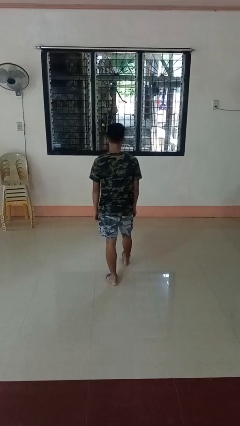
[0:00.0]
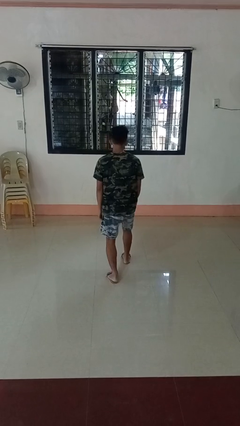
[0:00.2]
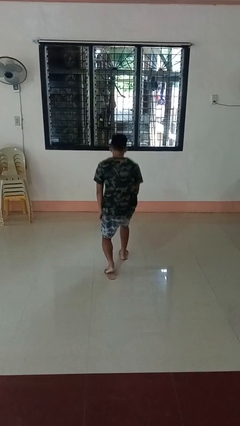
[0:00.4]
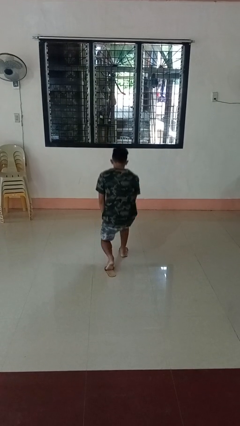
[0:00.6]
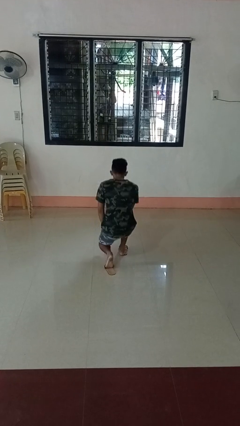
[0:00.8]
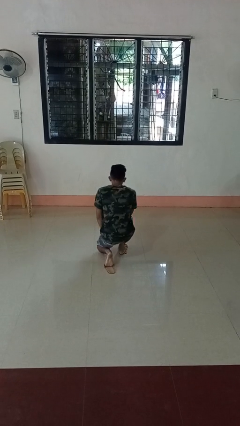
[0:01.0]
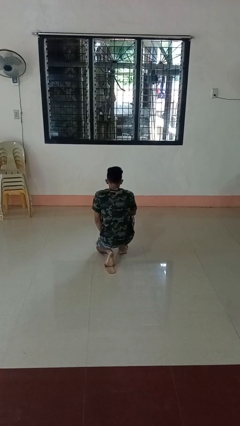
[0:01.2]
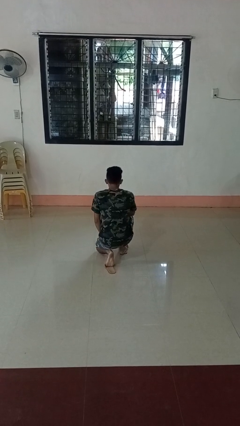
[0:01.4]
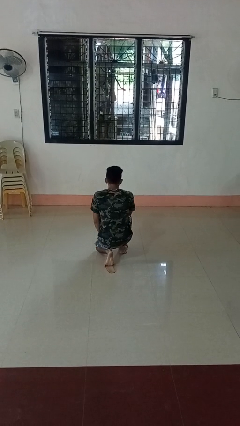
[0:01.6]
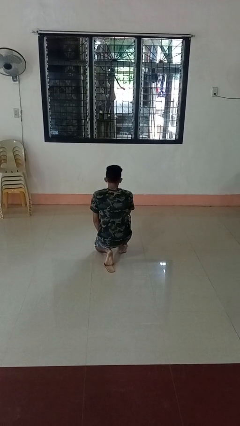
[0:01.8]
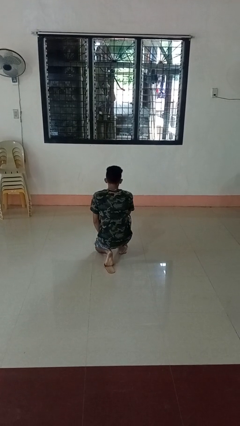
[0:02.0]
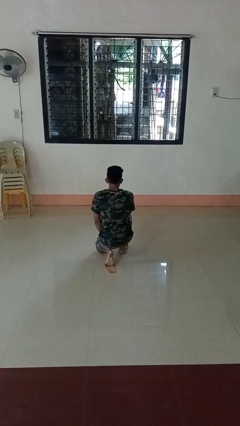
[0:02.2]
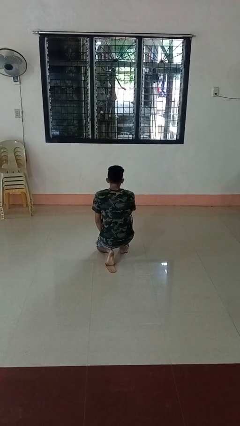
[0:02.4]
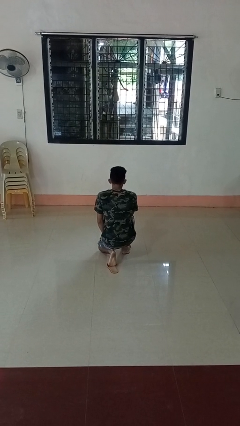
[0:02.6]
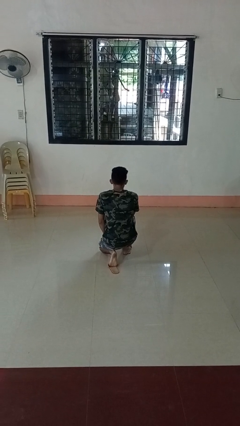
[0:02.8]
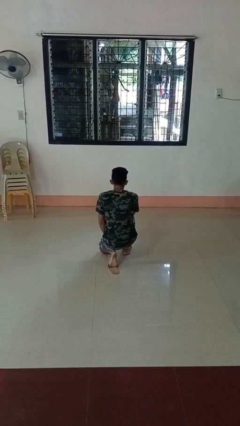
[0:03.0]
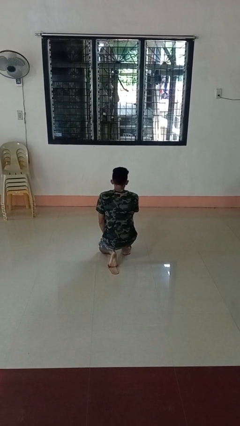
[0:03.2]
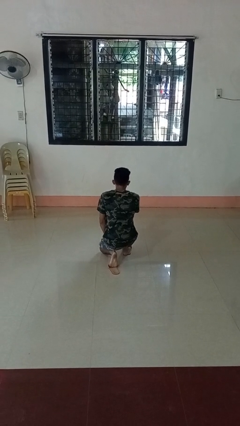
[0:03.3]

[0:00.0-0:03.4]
person kneels

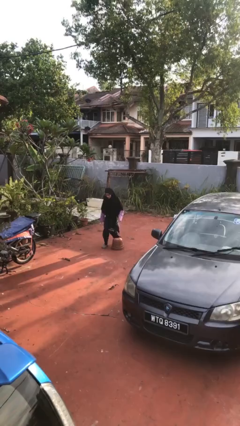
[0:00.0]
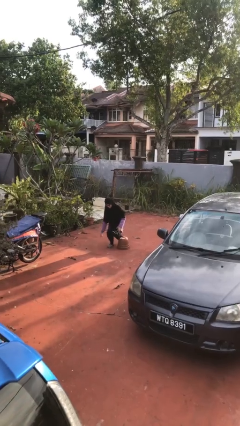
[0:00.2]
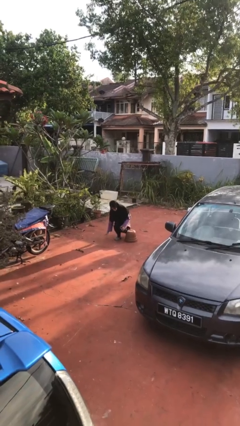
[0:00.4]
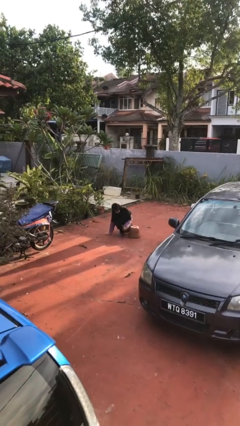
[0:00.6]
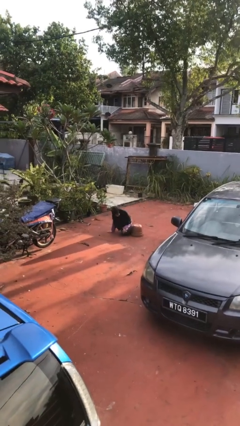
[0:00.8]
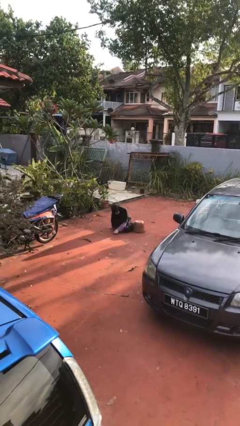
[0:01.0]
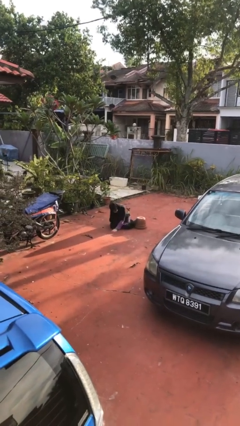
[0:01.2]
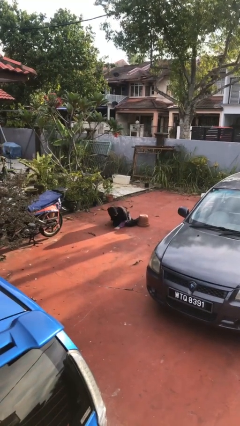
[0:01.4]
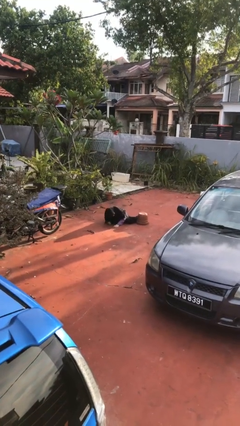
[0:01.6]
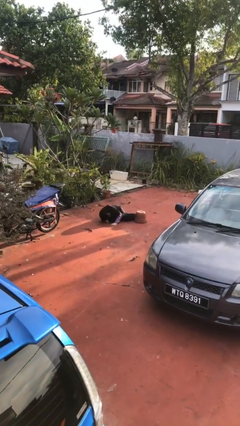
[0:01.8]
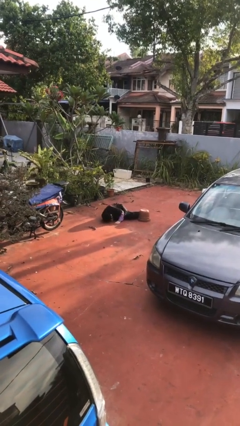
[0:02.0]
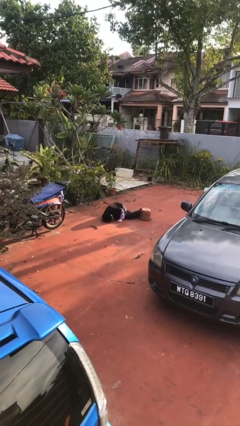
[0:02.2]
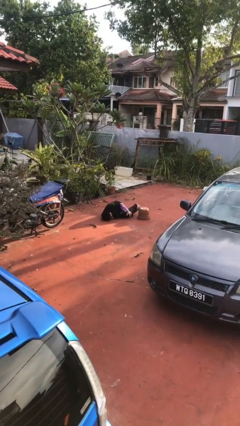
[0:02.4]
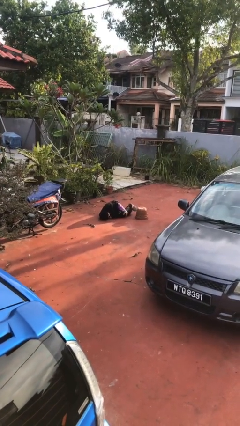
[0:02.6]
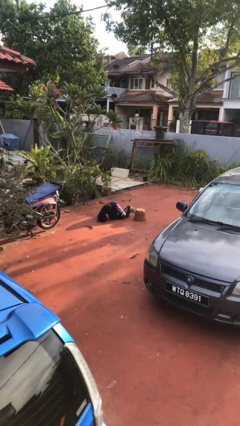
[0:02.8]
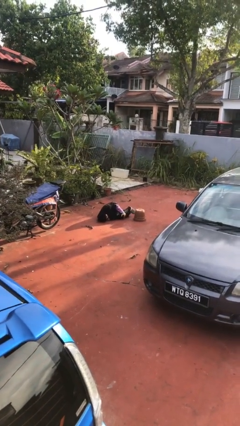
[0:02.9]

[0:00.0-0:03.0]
person lies down on floor

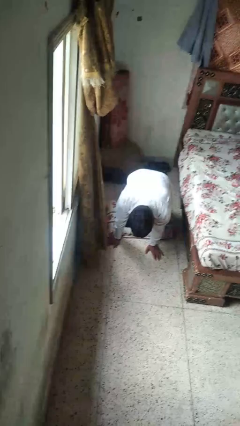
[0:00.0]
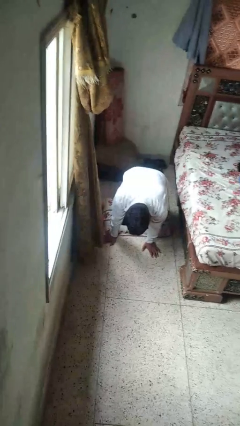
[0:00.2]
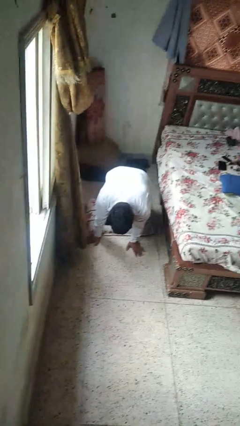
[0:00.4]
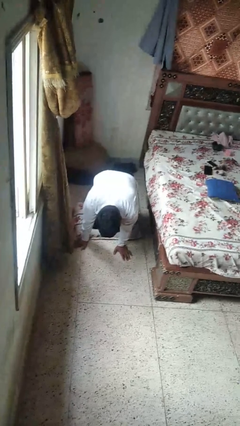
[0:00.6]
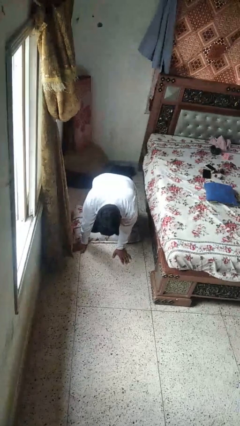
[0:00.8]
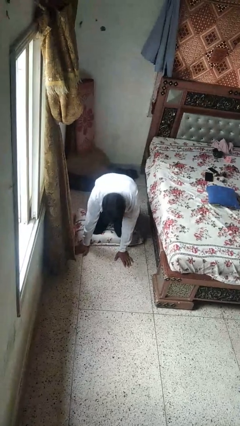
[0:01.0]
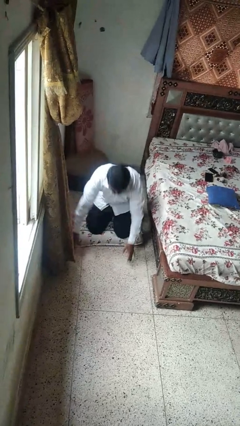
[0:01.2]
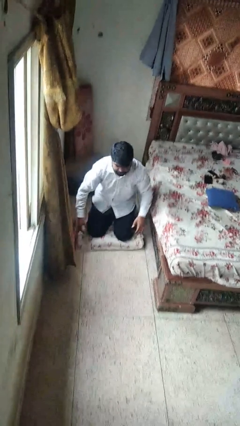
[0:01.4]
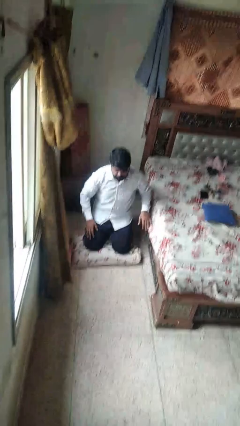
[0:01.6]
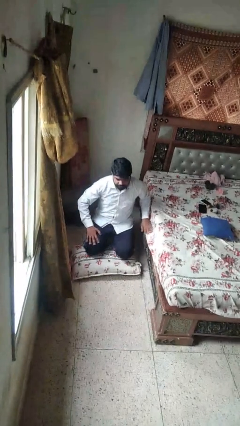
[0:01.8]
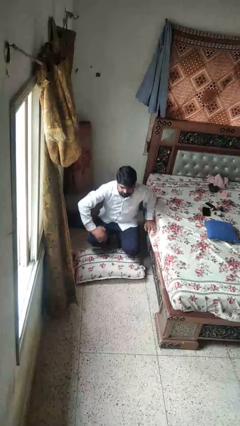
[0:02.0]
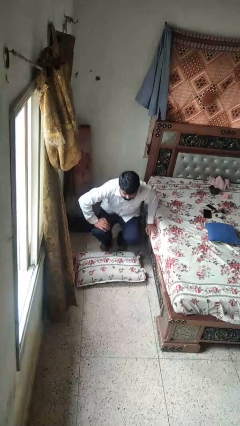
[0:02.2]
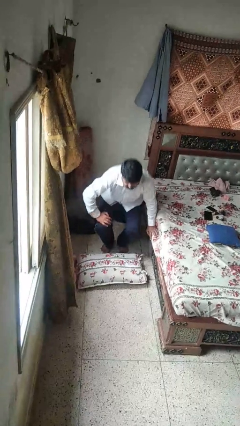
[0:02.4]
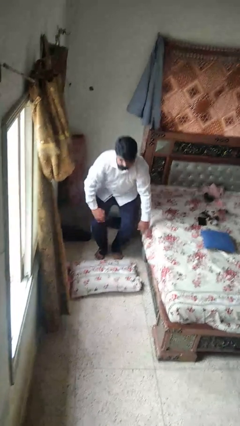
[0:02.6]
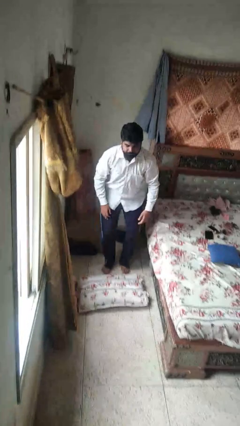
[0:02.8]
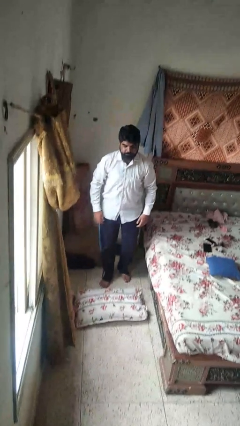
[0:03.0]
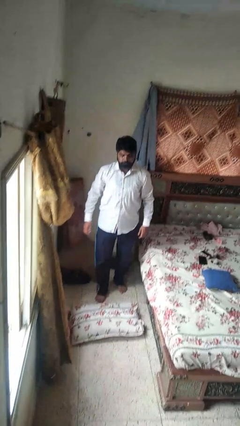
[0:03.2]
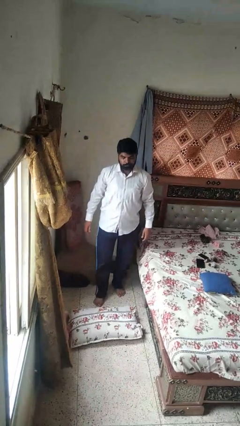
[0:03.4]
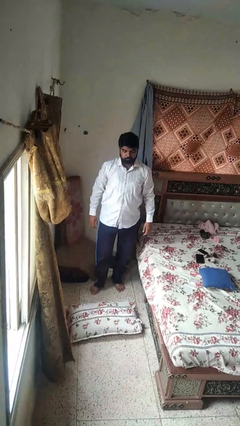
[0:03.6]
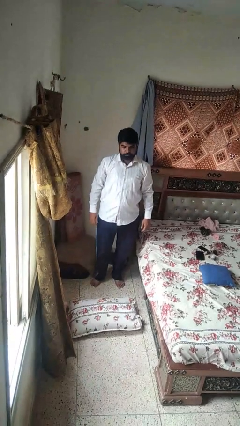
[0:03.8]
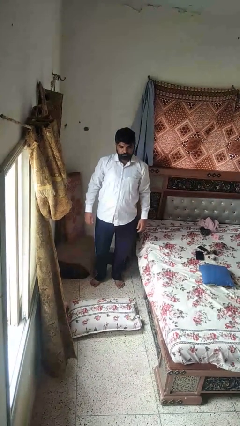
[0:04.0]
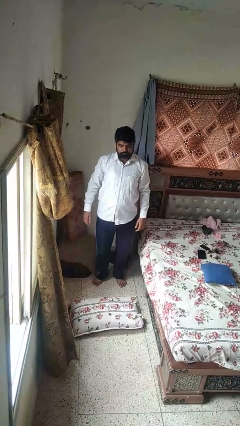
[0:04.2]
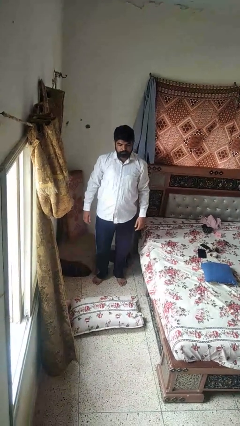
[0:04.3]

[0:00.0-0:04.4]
person stands up from floor

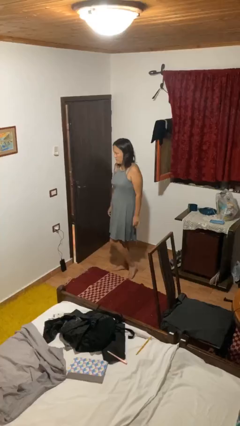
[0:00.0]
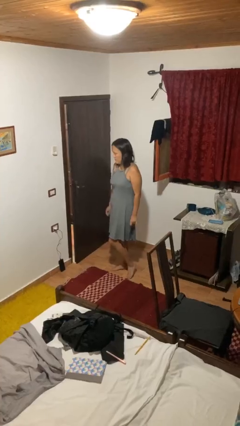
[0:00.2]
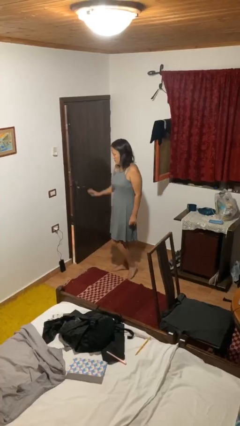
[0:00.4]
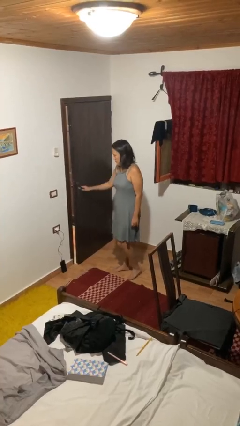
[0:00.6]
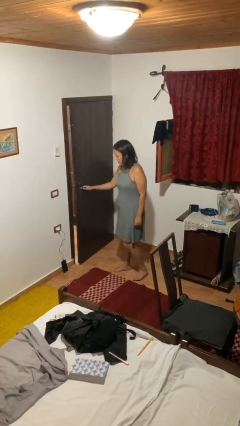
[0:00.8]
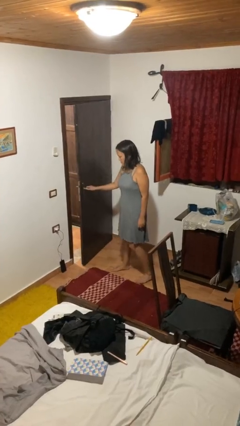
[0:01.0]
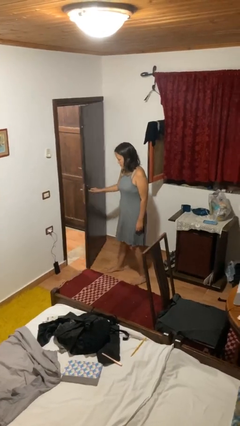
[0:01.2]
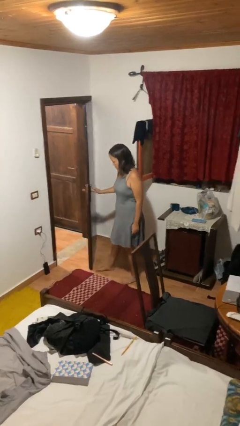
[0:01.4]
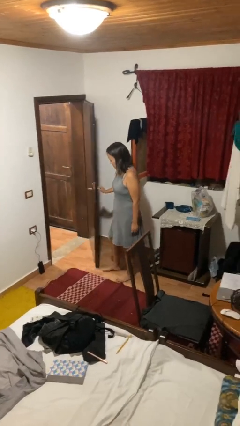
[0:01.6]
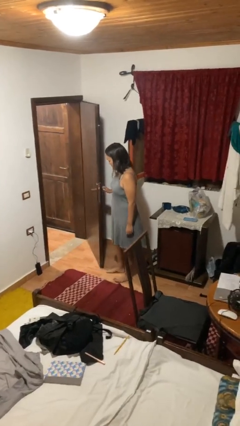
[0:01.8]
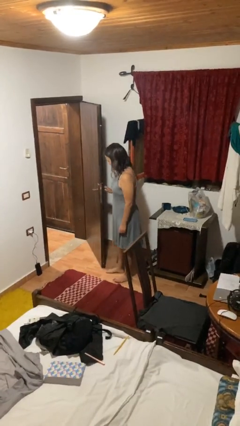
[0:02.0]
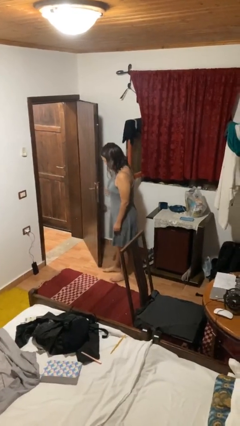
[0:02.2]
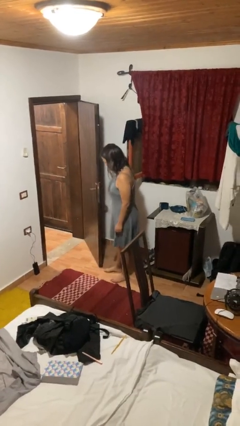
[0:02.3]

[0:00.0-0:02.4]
person opens facility door

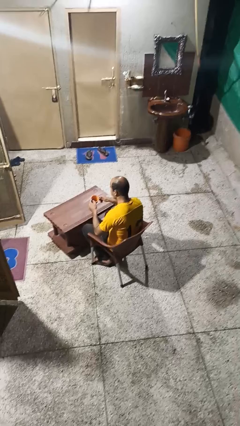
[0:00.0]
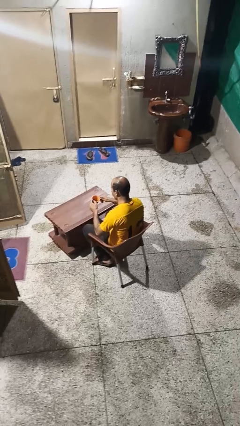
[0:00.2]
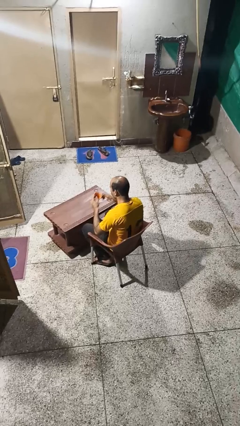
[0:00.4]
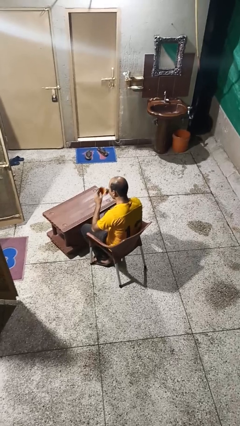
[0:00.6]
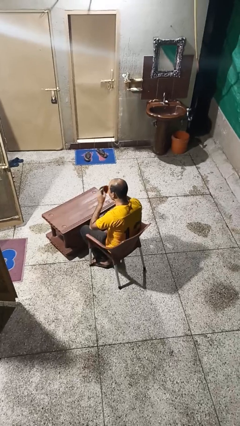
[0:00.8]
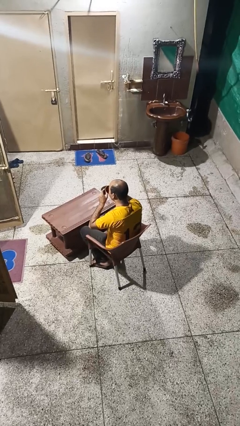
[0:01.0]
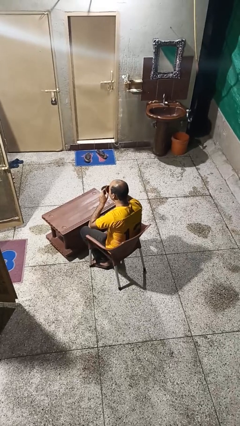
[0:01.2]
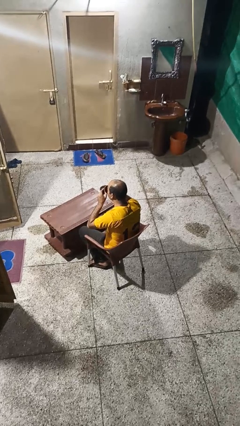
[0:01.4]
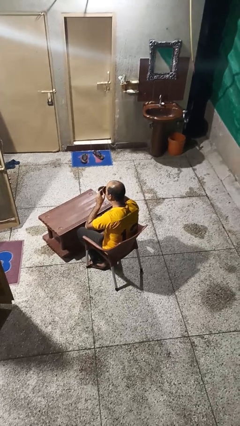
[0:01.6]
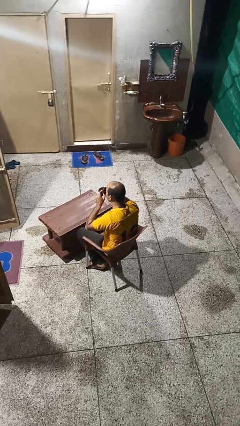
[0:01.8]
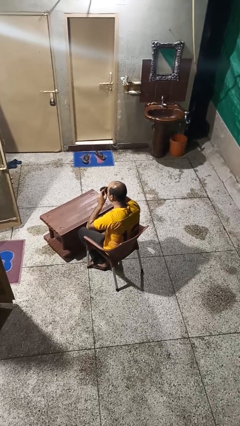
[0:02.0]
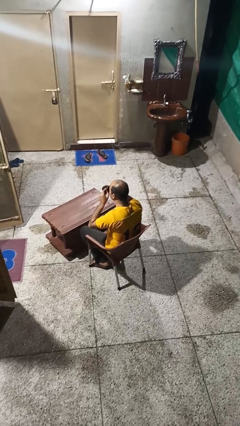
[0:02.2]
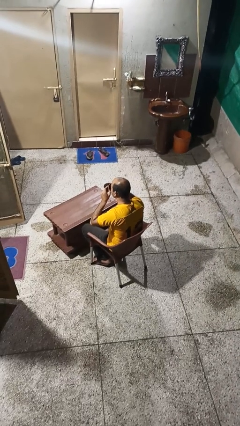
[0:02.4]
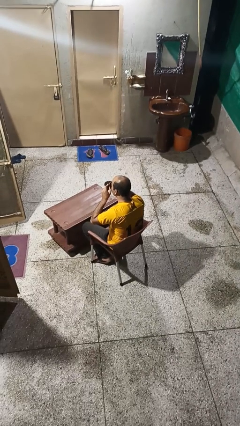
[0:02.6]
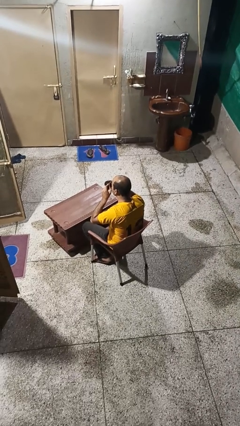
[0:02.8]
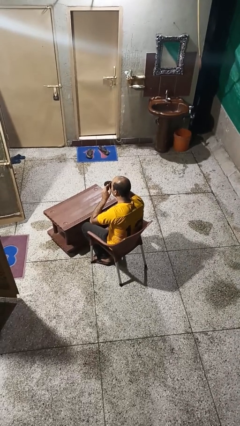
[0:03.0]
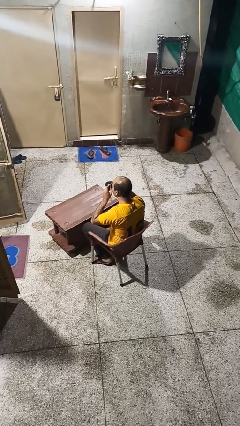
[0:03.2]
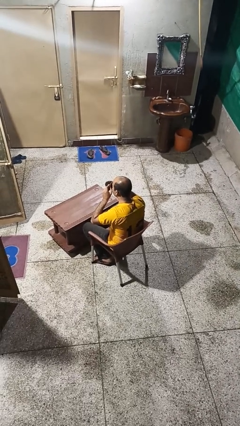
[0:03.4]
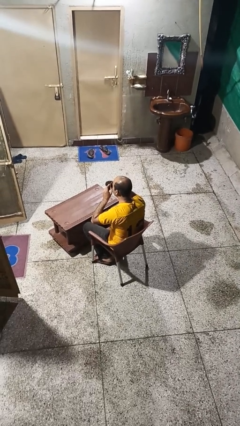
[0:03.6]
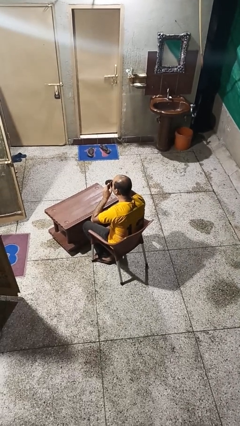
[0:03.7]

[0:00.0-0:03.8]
person drinks from mug

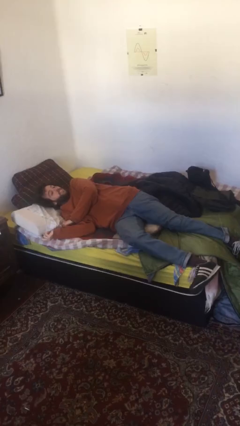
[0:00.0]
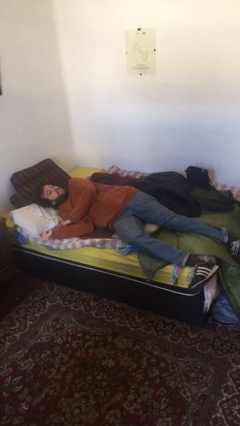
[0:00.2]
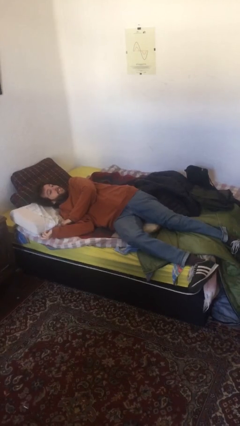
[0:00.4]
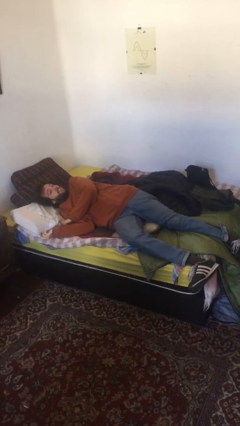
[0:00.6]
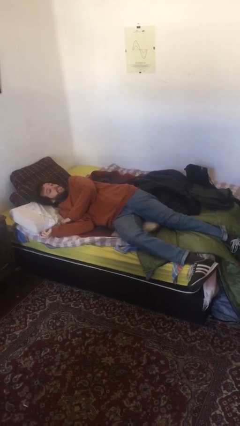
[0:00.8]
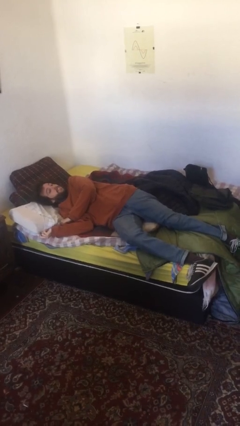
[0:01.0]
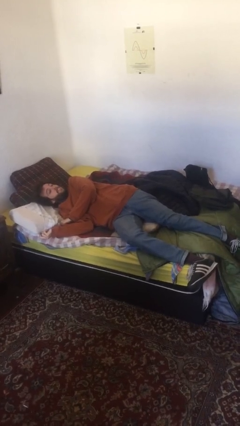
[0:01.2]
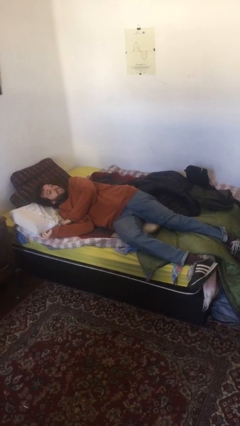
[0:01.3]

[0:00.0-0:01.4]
person lies down on bed
